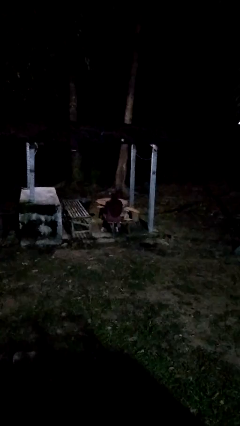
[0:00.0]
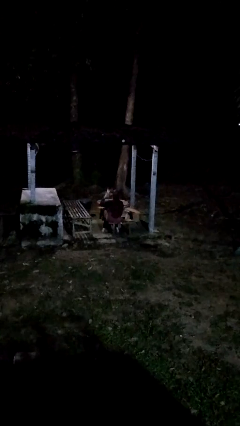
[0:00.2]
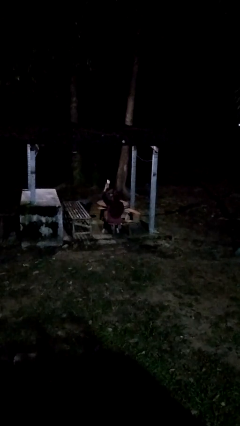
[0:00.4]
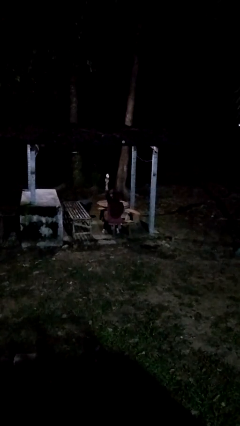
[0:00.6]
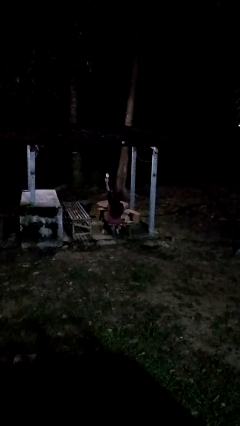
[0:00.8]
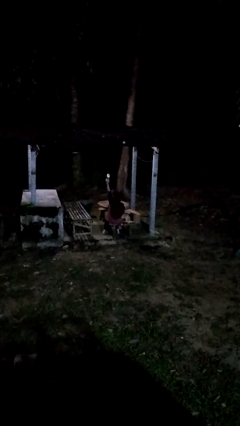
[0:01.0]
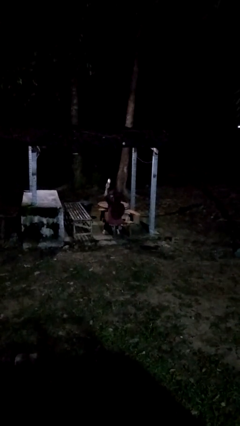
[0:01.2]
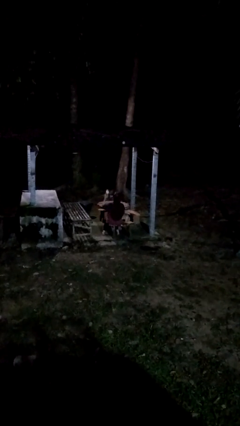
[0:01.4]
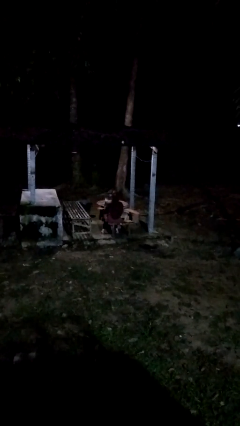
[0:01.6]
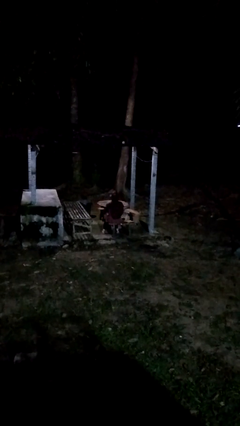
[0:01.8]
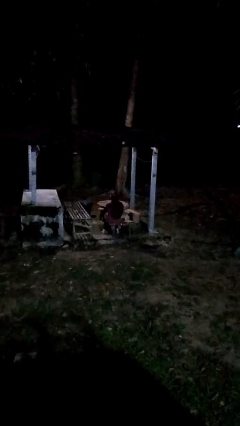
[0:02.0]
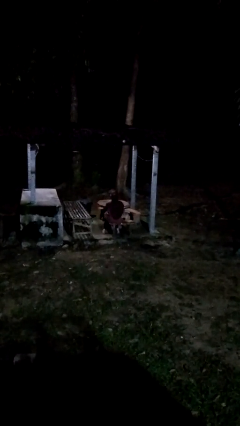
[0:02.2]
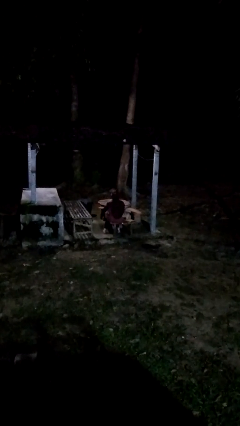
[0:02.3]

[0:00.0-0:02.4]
person holds object above head

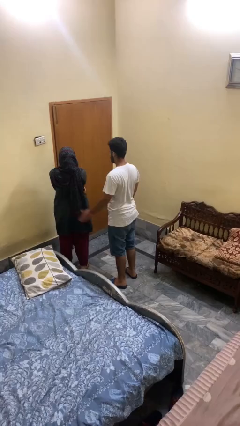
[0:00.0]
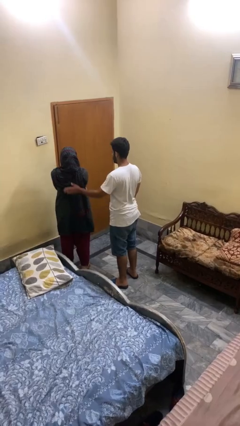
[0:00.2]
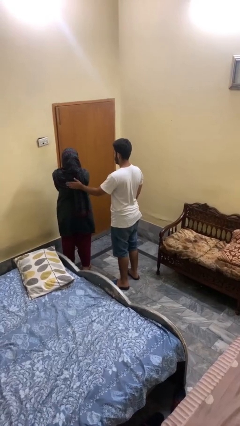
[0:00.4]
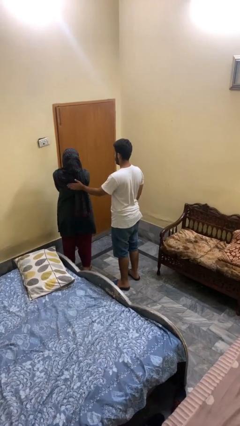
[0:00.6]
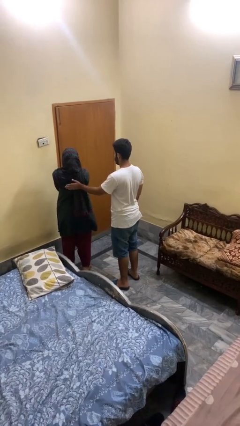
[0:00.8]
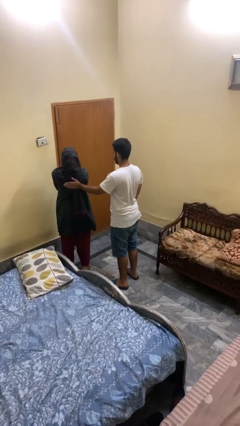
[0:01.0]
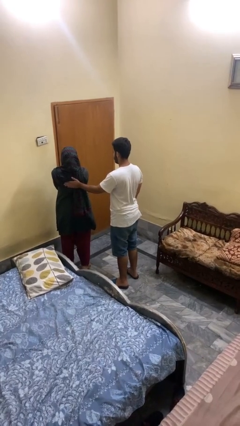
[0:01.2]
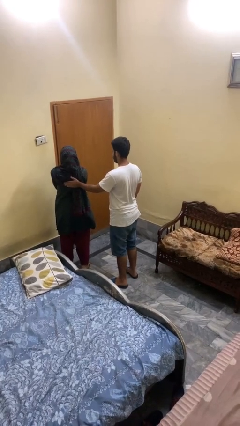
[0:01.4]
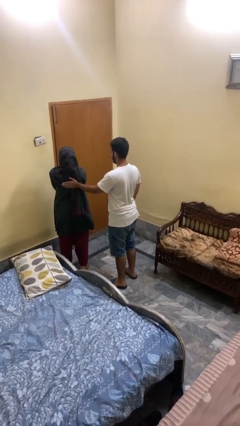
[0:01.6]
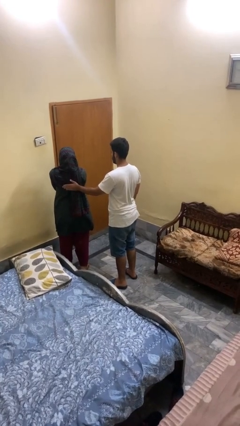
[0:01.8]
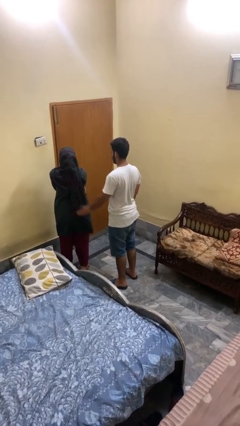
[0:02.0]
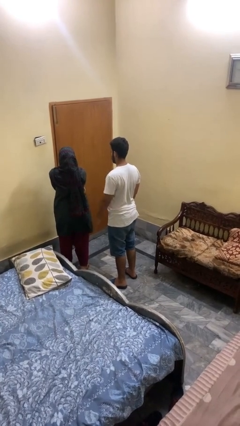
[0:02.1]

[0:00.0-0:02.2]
person touches back of person

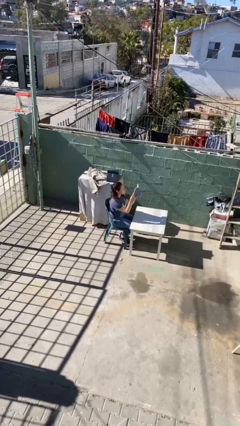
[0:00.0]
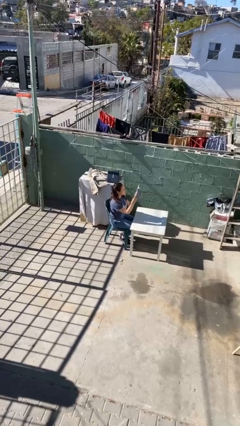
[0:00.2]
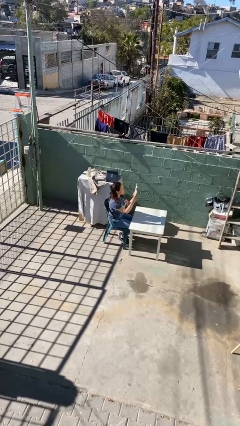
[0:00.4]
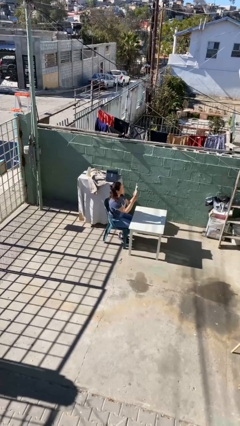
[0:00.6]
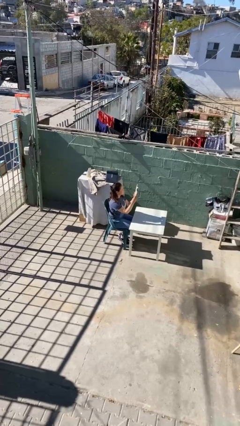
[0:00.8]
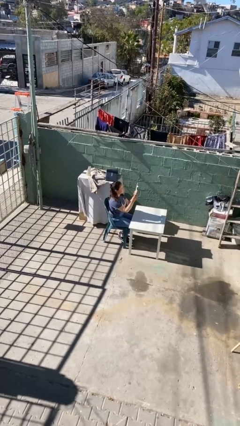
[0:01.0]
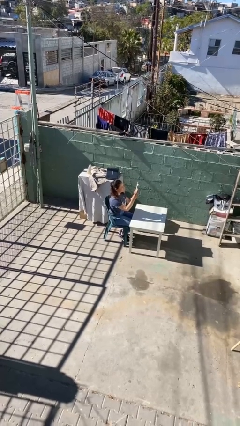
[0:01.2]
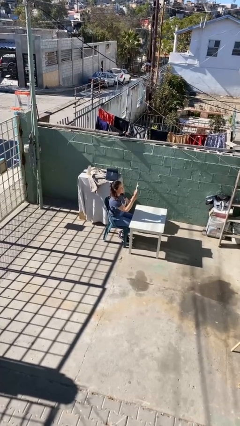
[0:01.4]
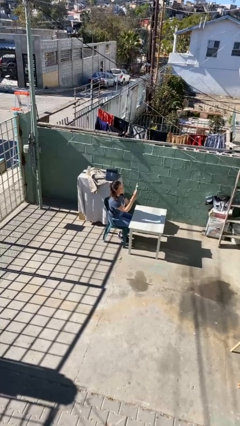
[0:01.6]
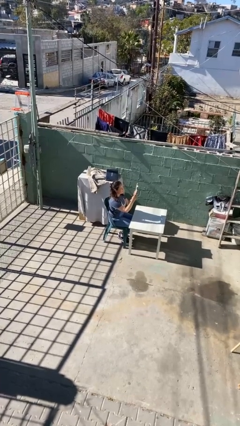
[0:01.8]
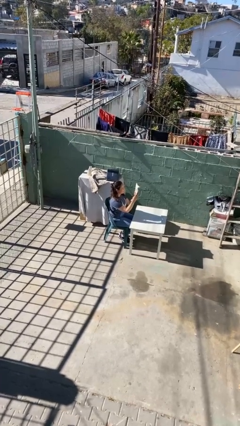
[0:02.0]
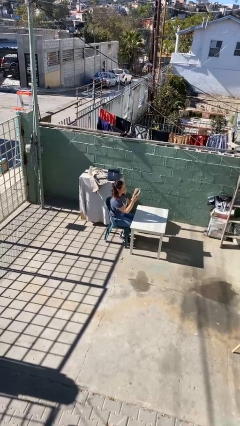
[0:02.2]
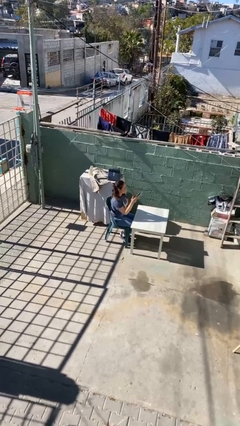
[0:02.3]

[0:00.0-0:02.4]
person reads document

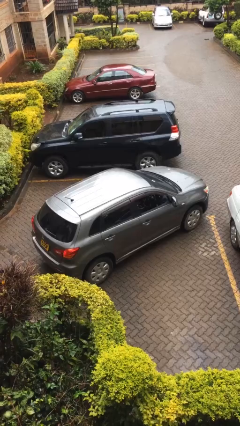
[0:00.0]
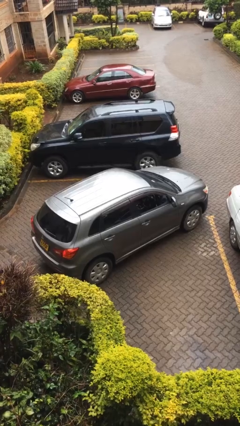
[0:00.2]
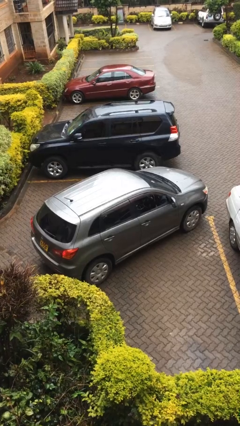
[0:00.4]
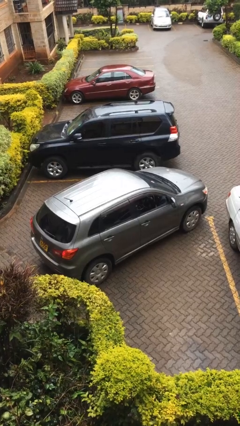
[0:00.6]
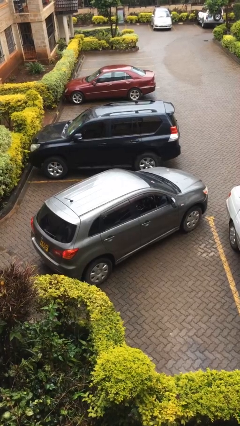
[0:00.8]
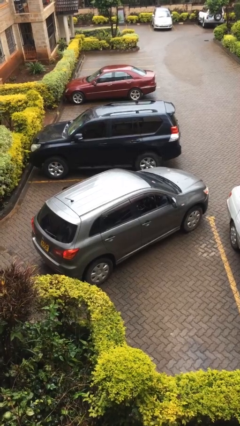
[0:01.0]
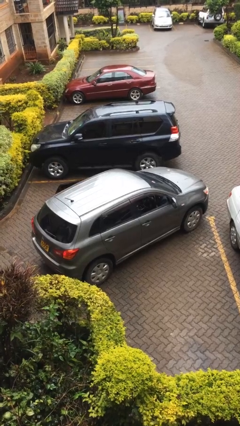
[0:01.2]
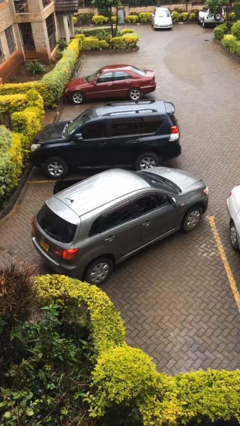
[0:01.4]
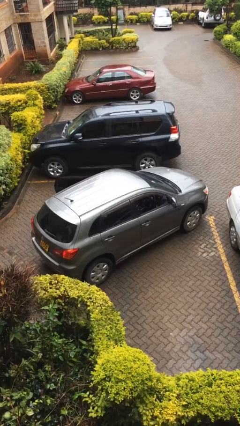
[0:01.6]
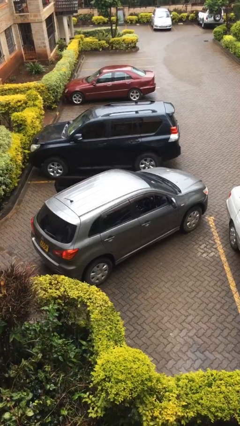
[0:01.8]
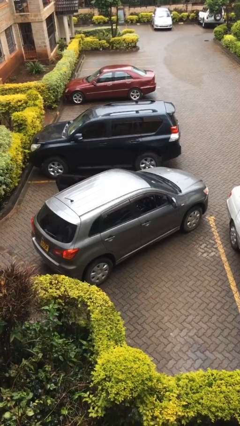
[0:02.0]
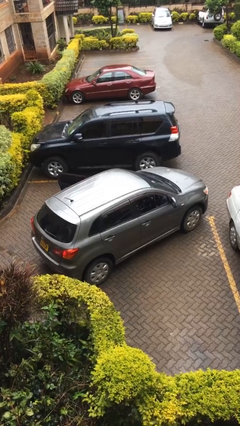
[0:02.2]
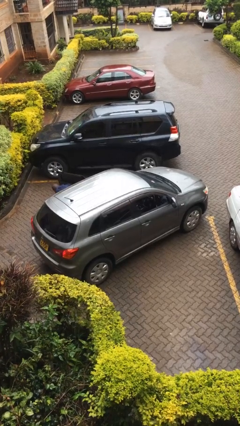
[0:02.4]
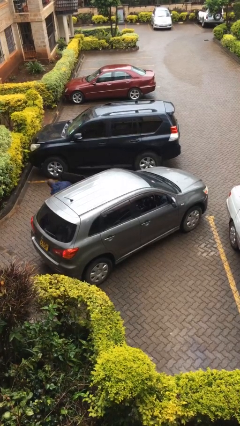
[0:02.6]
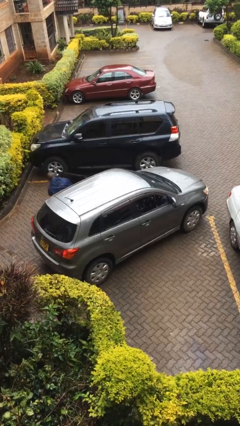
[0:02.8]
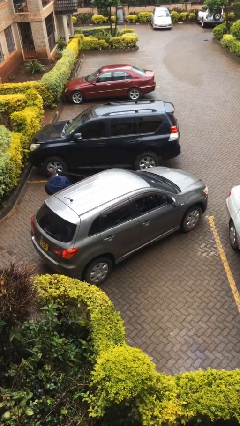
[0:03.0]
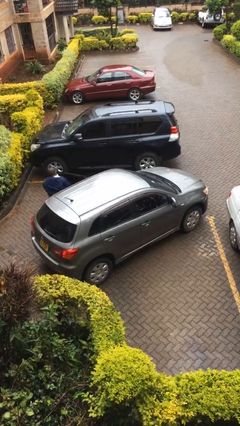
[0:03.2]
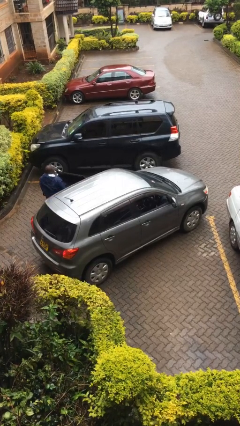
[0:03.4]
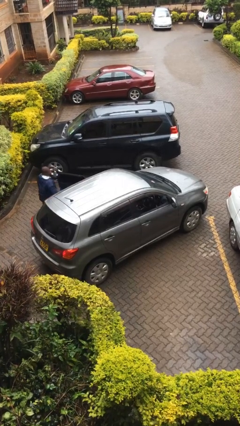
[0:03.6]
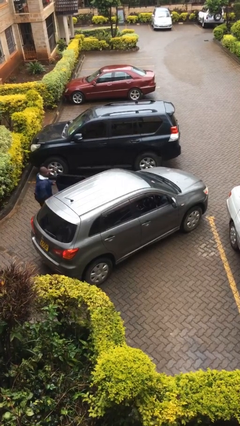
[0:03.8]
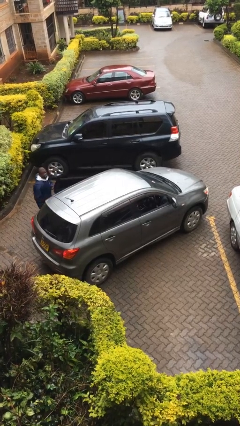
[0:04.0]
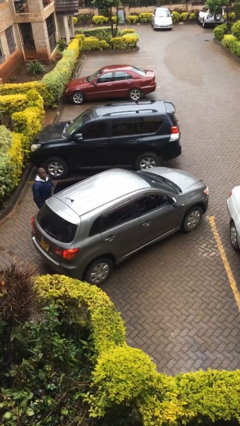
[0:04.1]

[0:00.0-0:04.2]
car drops off person

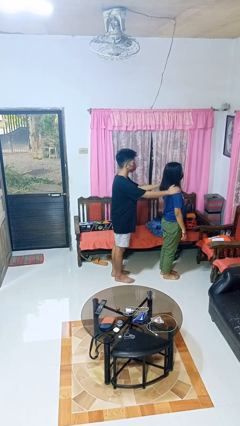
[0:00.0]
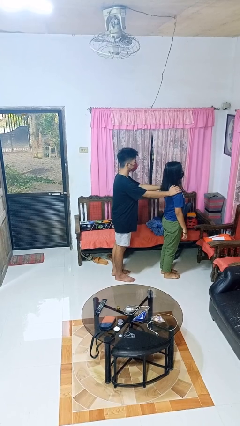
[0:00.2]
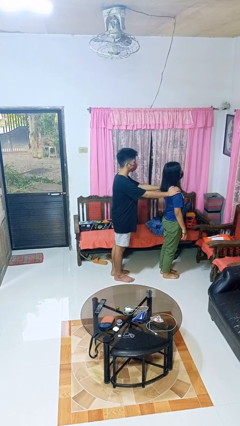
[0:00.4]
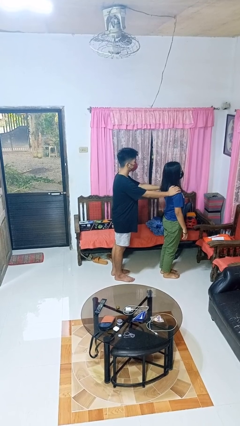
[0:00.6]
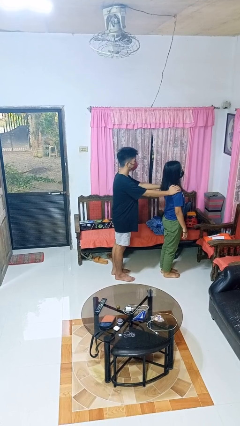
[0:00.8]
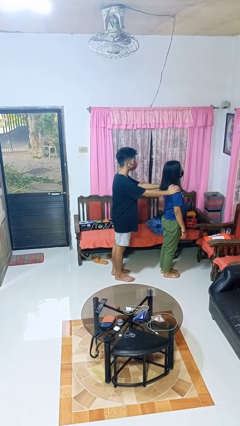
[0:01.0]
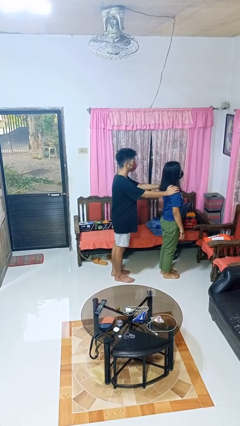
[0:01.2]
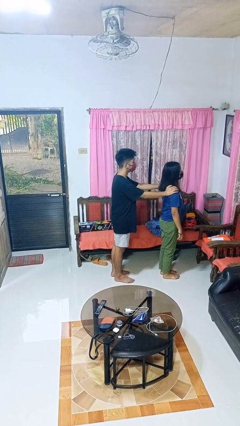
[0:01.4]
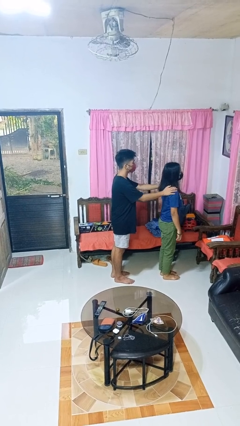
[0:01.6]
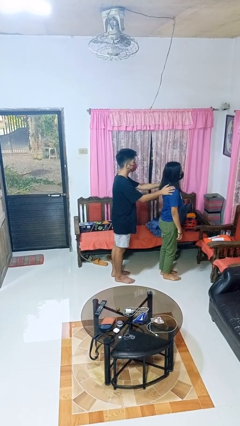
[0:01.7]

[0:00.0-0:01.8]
person grabs person by shoulder

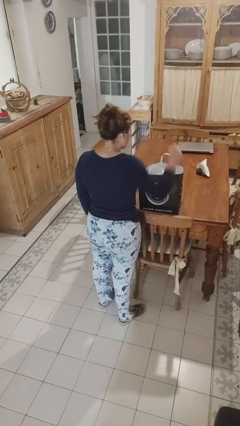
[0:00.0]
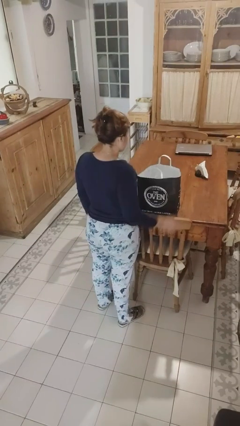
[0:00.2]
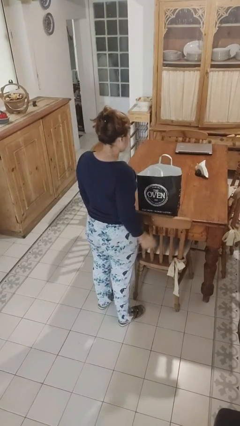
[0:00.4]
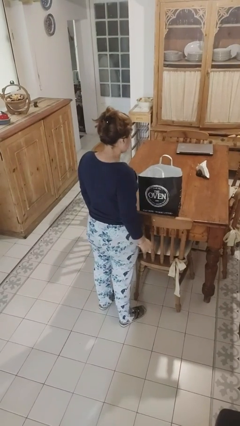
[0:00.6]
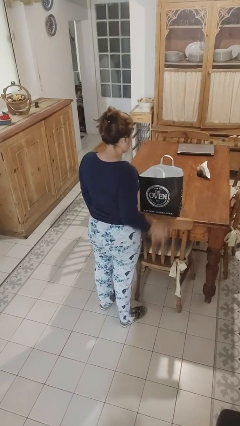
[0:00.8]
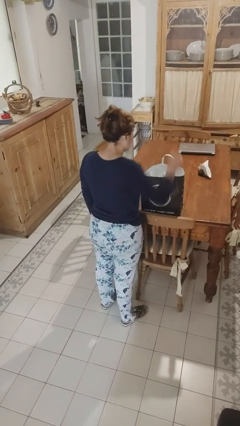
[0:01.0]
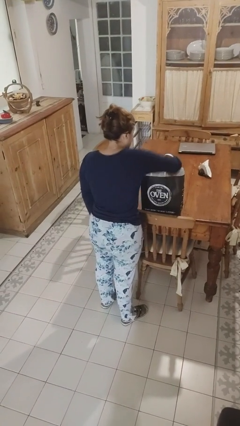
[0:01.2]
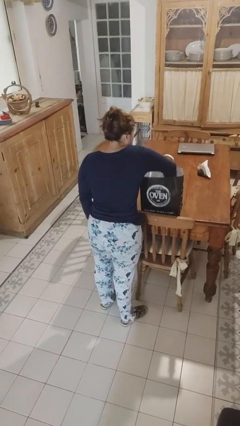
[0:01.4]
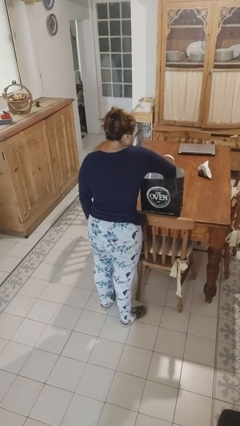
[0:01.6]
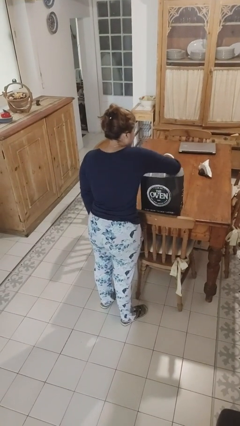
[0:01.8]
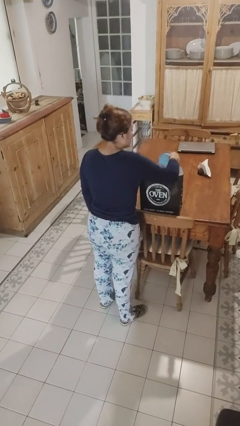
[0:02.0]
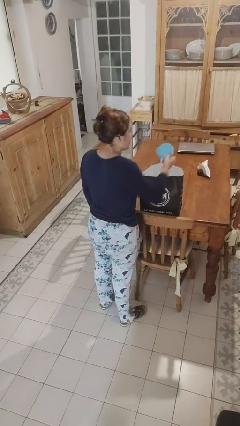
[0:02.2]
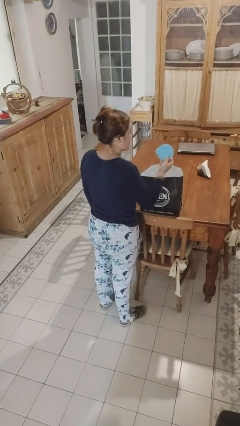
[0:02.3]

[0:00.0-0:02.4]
person takes object from bag

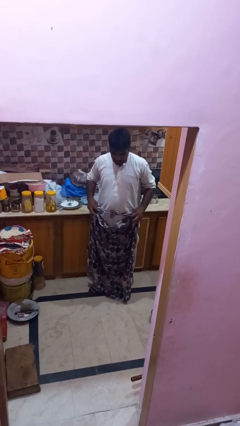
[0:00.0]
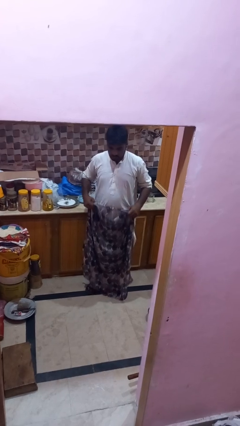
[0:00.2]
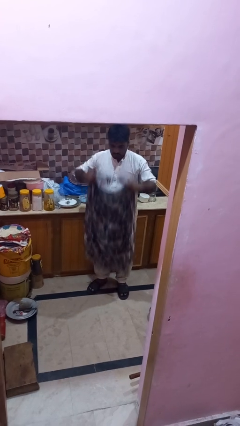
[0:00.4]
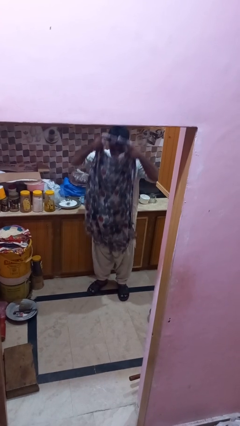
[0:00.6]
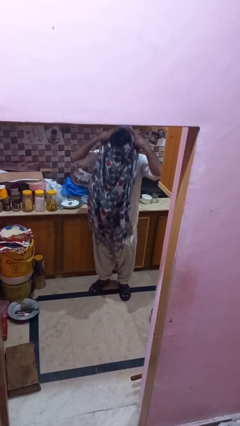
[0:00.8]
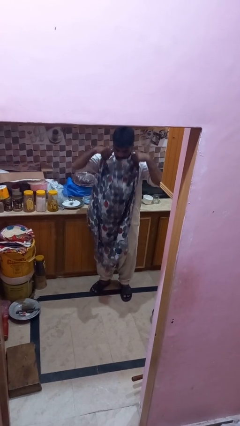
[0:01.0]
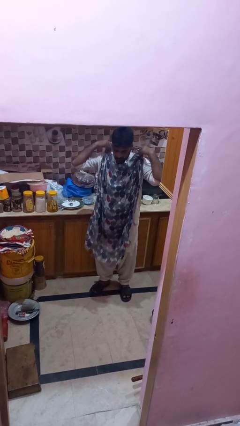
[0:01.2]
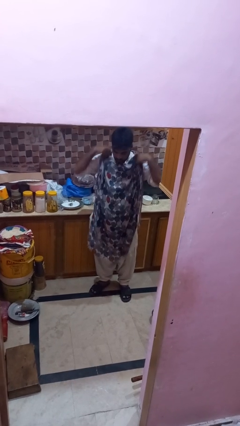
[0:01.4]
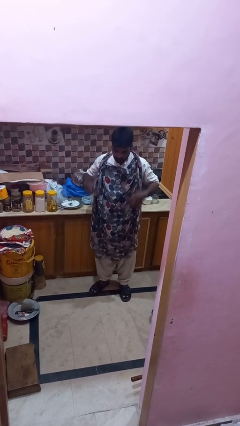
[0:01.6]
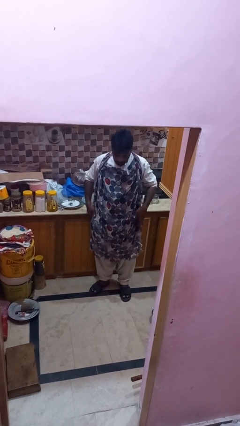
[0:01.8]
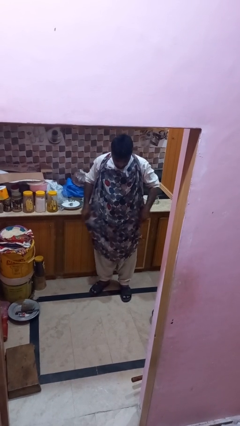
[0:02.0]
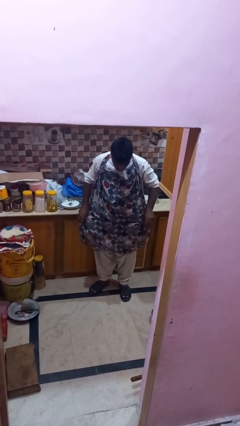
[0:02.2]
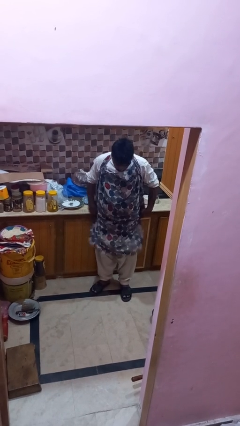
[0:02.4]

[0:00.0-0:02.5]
person puts on apron
